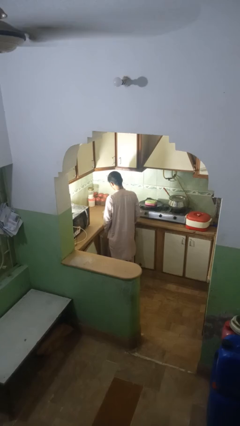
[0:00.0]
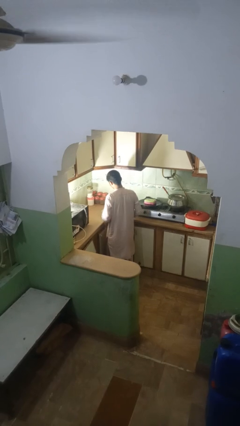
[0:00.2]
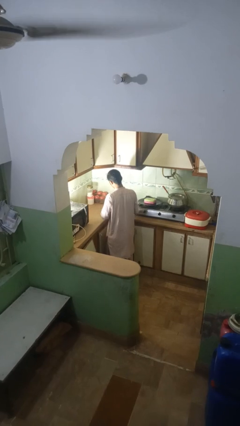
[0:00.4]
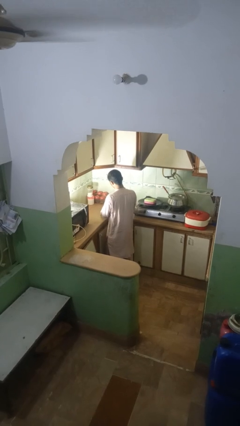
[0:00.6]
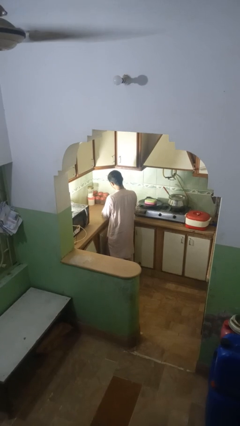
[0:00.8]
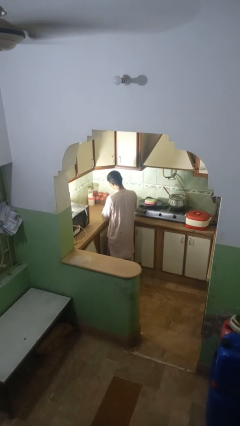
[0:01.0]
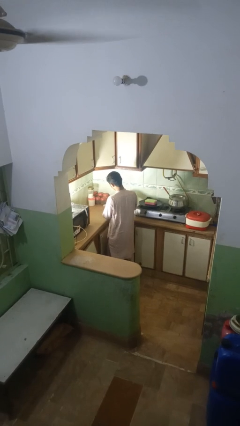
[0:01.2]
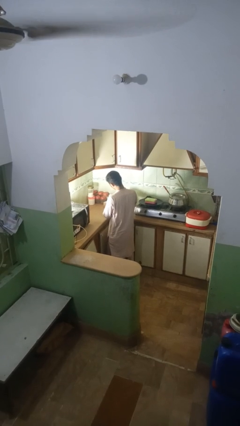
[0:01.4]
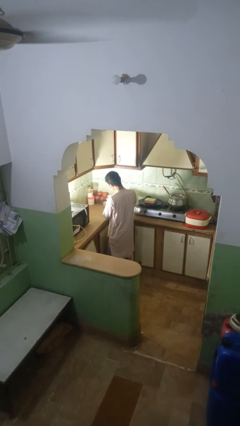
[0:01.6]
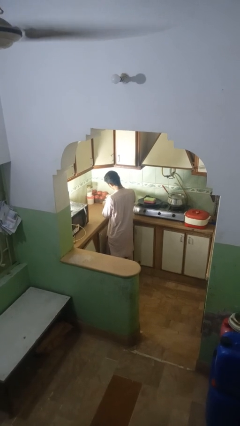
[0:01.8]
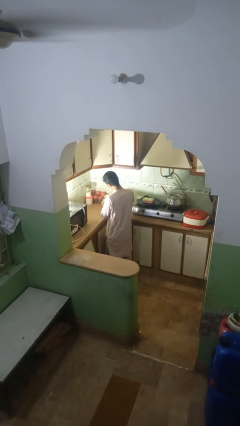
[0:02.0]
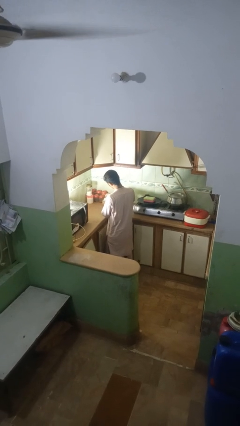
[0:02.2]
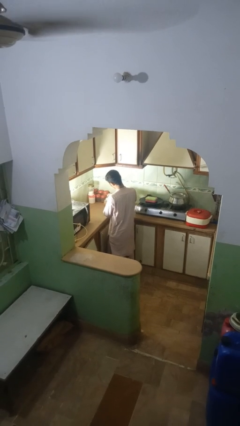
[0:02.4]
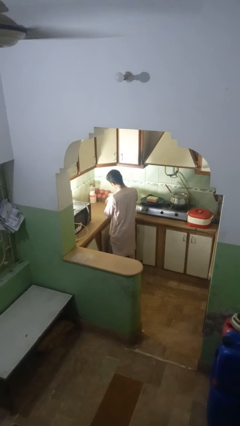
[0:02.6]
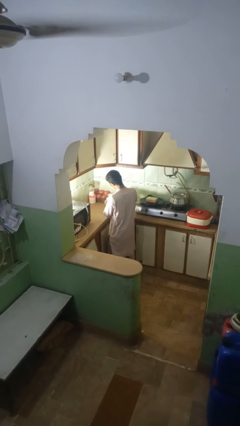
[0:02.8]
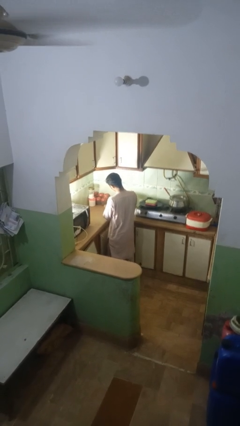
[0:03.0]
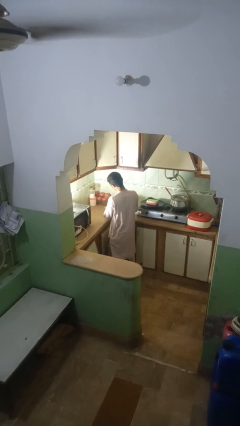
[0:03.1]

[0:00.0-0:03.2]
person pours into bowl

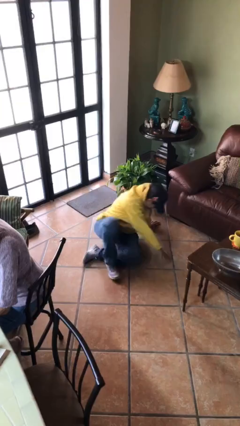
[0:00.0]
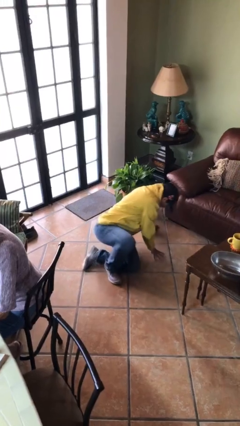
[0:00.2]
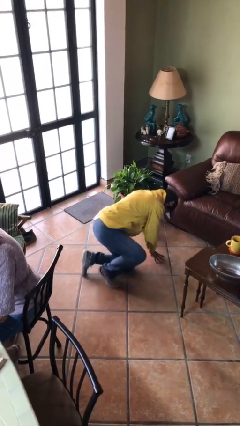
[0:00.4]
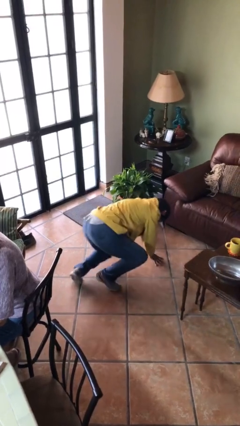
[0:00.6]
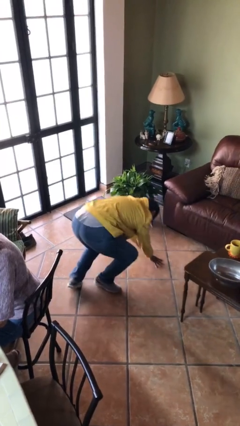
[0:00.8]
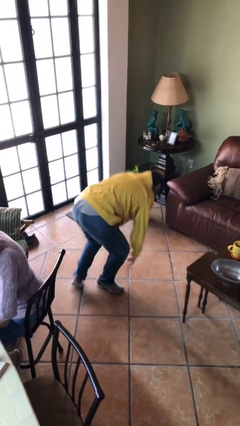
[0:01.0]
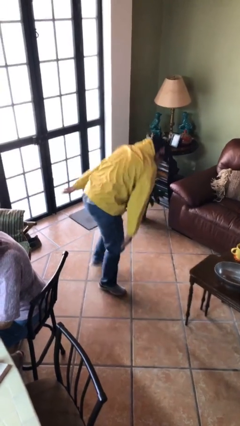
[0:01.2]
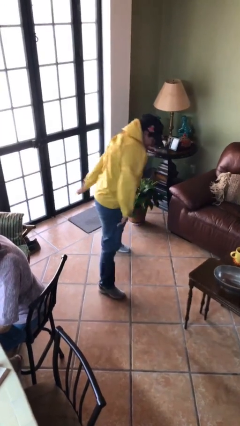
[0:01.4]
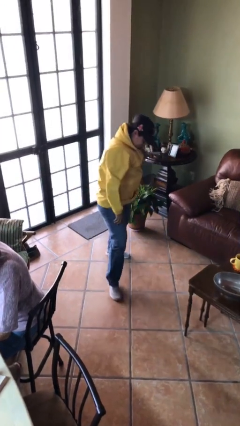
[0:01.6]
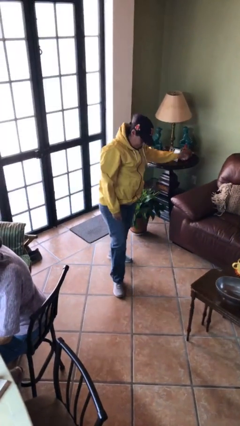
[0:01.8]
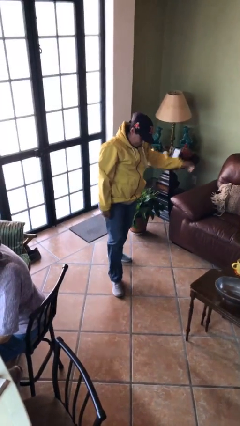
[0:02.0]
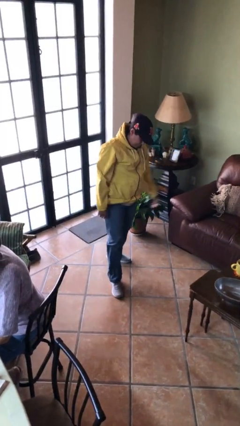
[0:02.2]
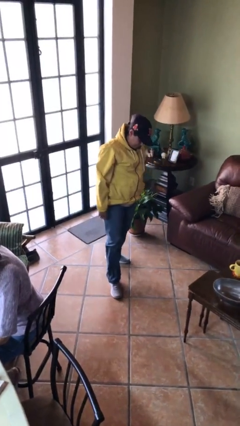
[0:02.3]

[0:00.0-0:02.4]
person stands up from floor

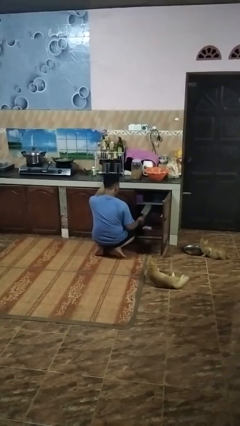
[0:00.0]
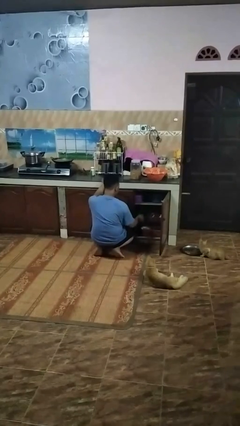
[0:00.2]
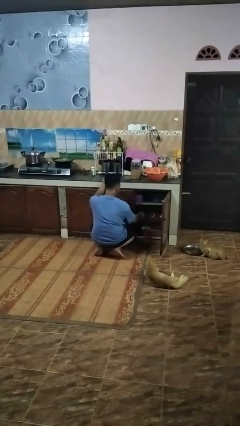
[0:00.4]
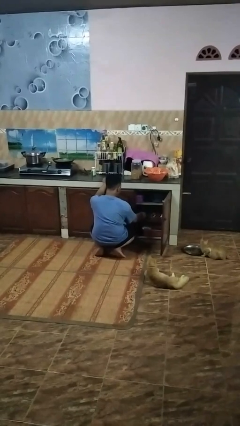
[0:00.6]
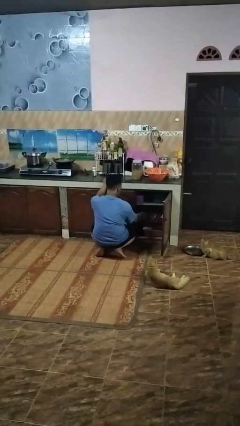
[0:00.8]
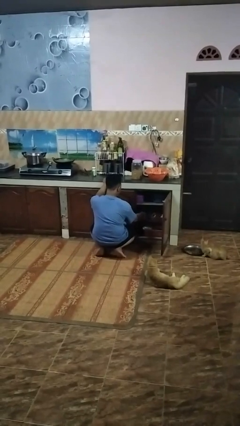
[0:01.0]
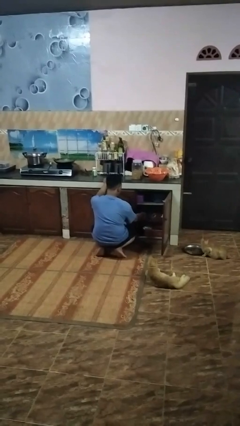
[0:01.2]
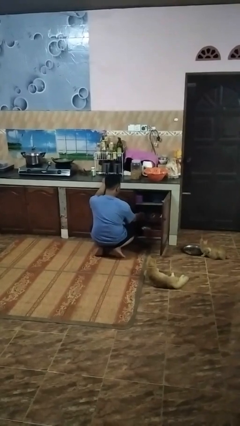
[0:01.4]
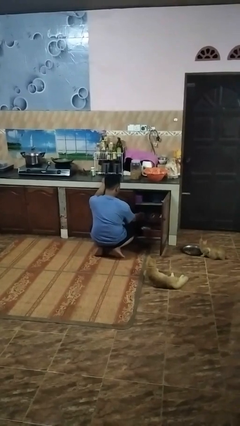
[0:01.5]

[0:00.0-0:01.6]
person puts object into kitchen drawer

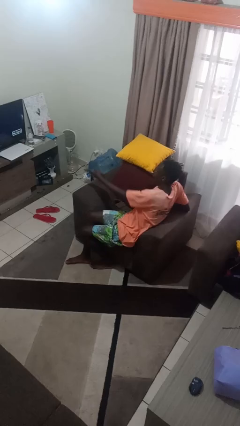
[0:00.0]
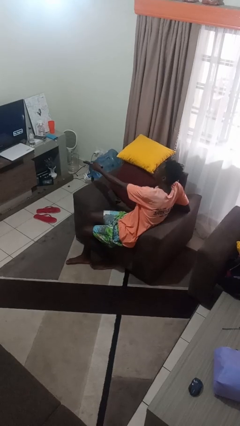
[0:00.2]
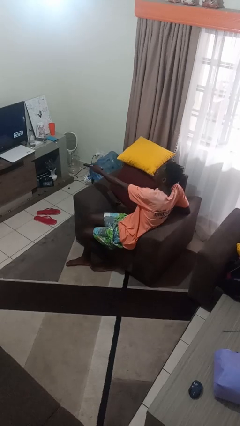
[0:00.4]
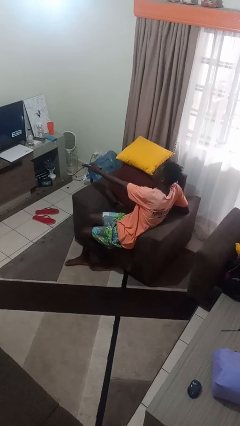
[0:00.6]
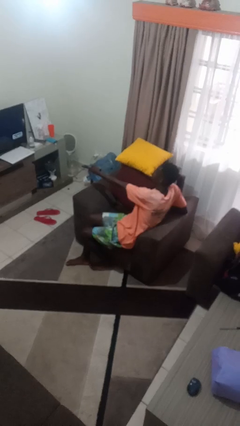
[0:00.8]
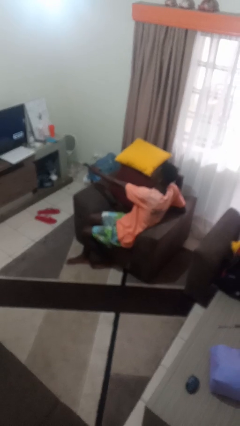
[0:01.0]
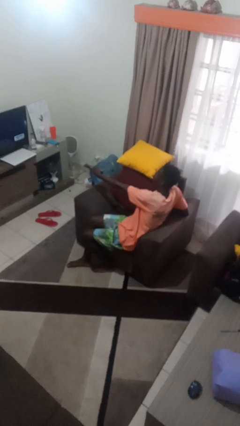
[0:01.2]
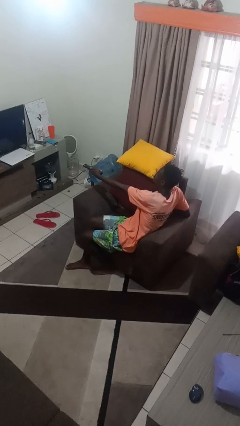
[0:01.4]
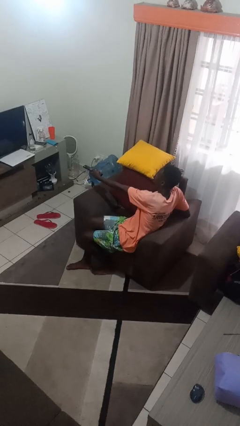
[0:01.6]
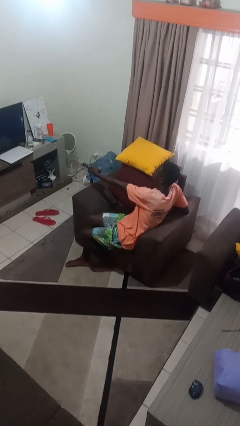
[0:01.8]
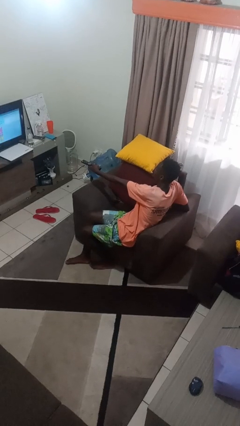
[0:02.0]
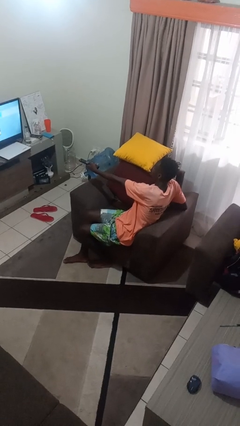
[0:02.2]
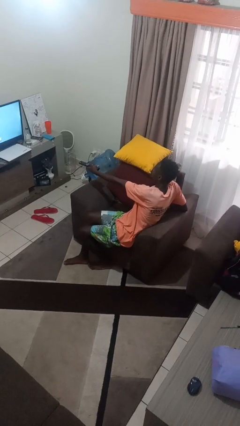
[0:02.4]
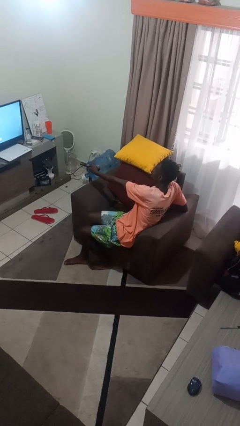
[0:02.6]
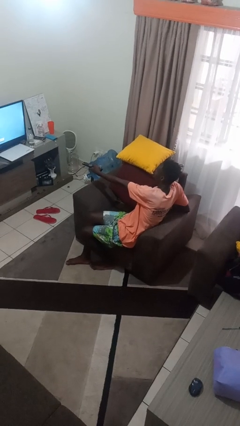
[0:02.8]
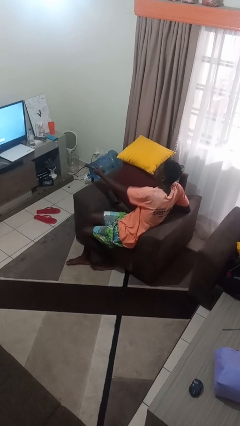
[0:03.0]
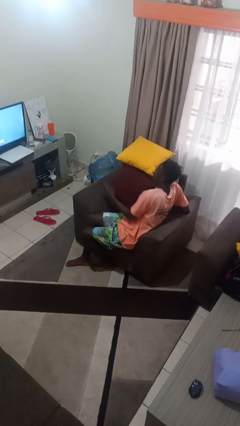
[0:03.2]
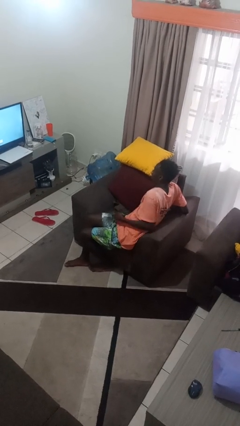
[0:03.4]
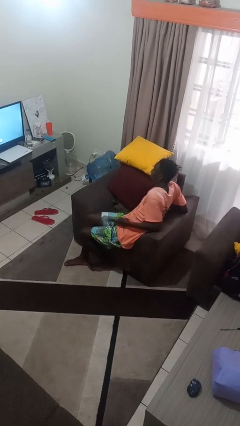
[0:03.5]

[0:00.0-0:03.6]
person uses television remote

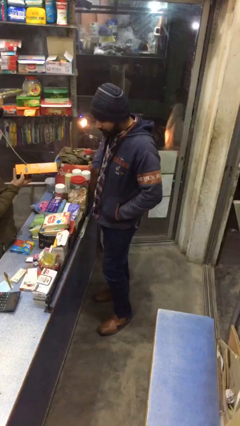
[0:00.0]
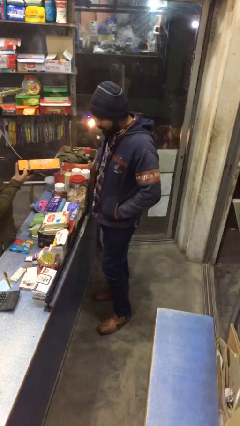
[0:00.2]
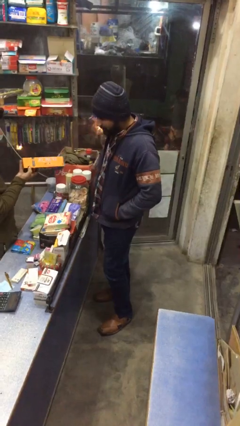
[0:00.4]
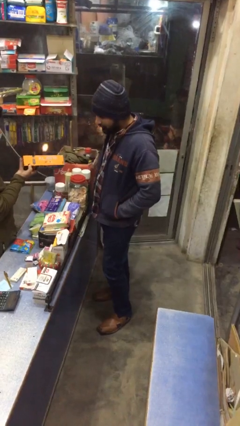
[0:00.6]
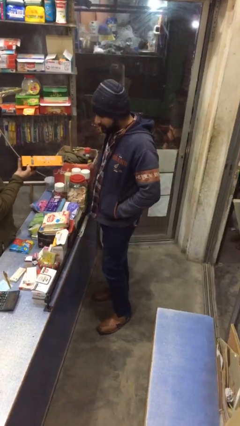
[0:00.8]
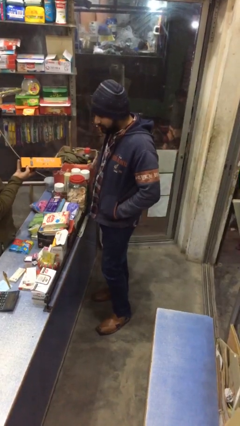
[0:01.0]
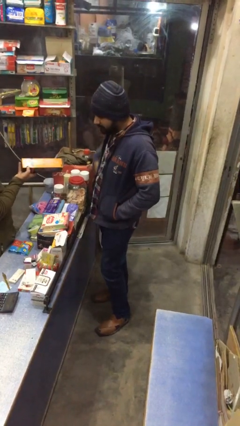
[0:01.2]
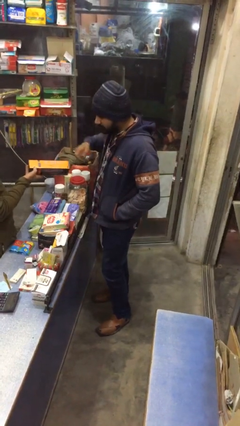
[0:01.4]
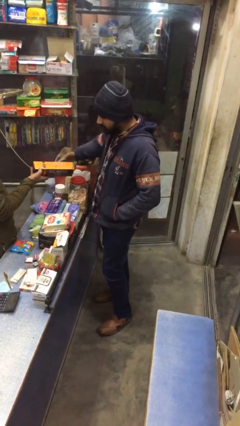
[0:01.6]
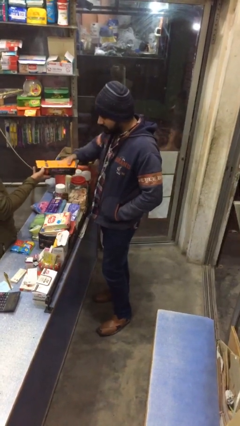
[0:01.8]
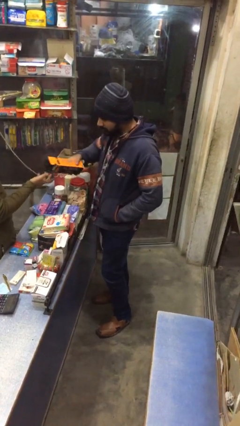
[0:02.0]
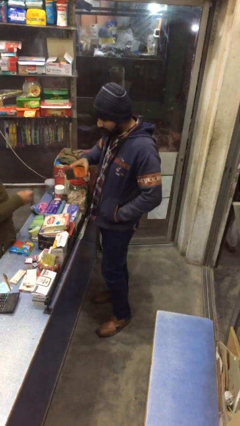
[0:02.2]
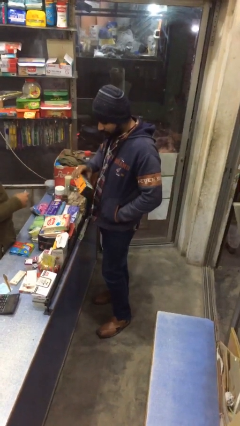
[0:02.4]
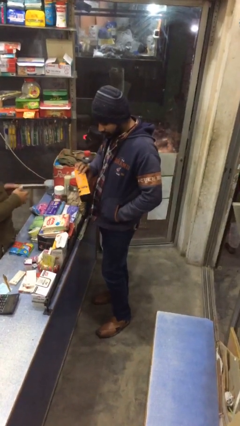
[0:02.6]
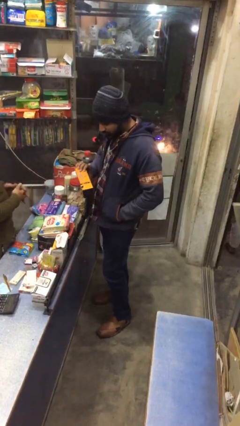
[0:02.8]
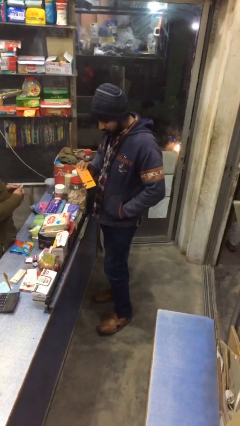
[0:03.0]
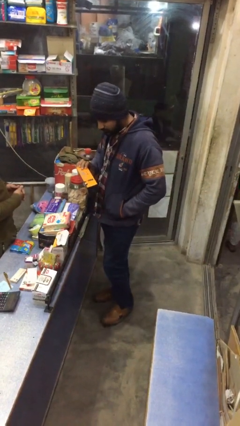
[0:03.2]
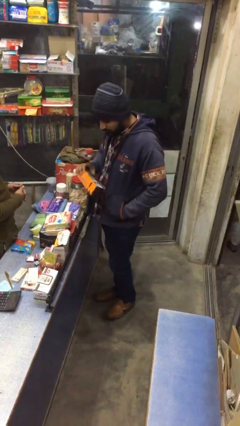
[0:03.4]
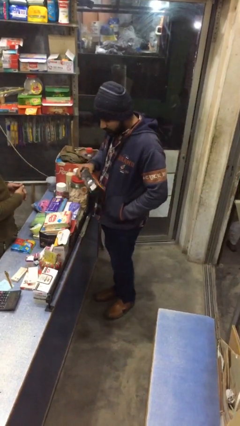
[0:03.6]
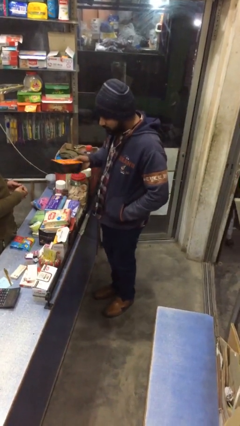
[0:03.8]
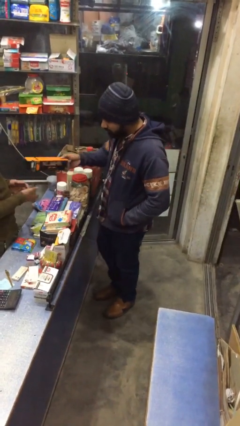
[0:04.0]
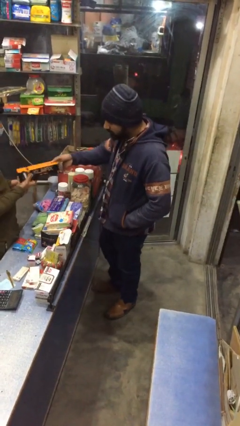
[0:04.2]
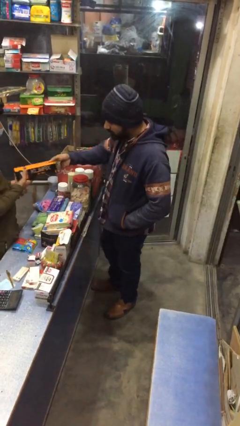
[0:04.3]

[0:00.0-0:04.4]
person transfers object to person

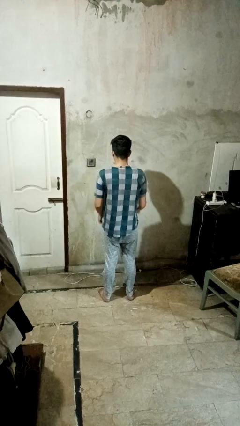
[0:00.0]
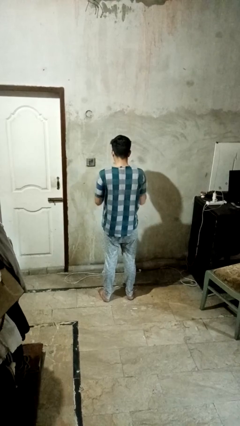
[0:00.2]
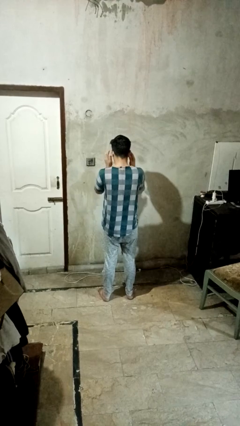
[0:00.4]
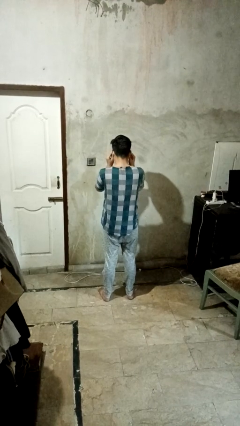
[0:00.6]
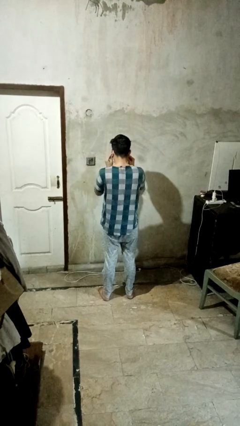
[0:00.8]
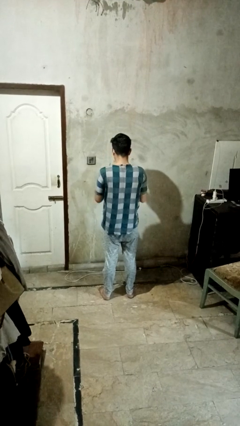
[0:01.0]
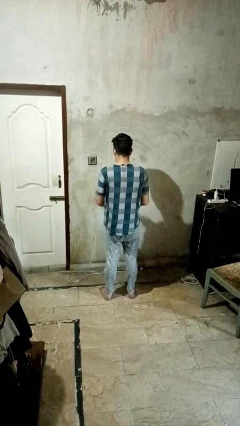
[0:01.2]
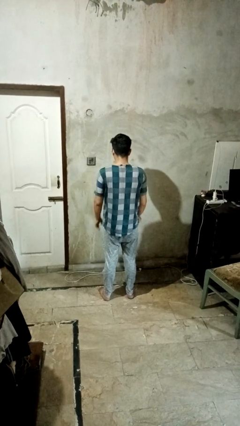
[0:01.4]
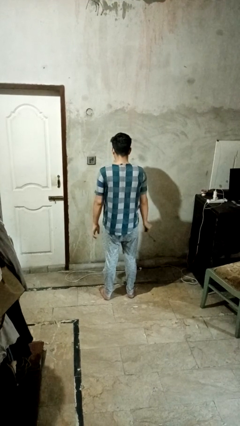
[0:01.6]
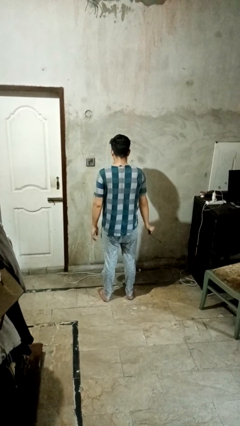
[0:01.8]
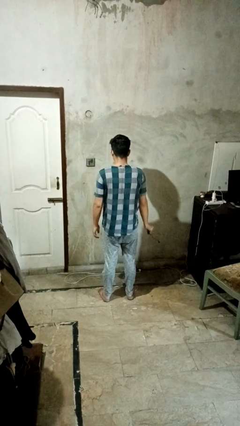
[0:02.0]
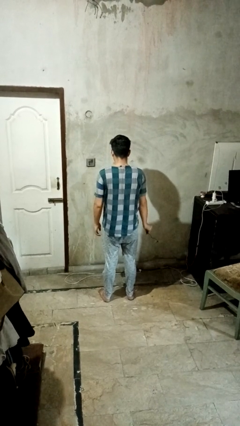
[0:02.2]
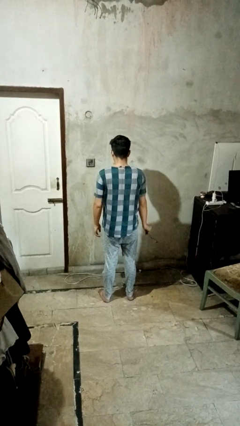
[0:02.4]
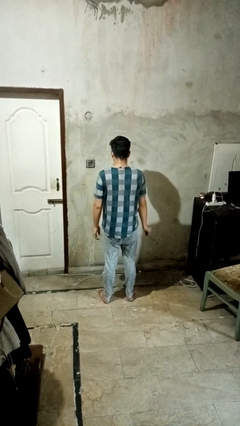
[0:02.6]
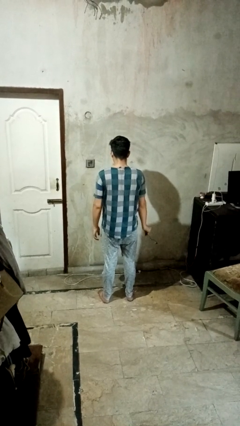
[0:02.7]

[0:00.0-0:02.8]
person takes off glasses
